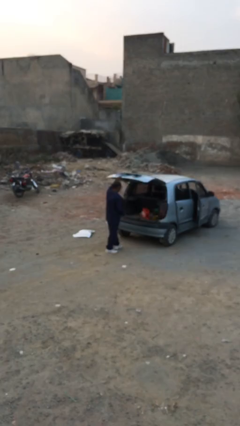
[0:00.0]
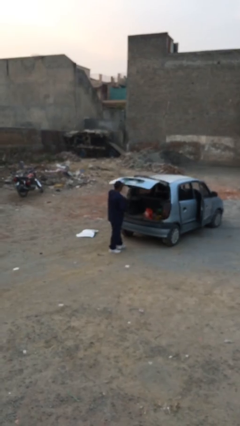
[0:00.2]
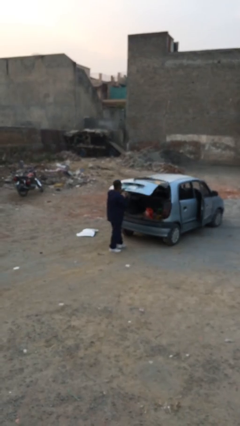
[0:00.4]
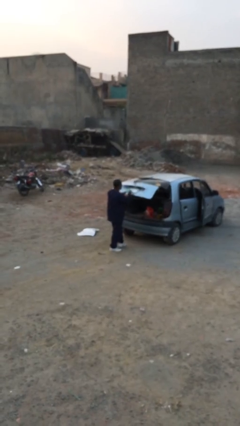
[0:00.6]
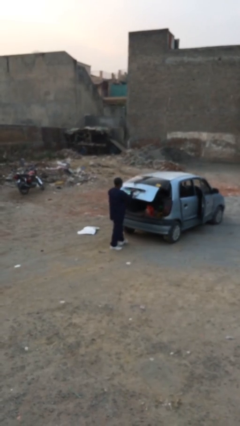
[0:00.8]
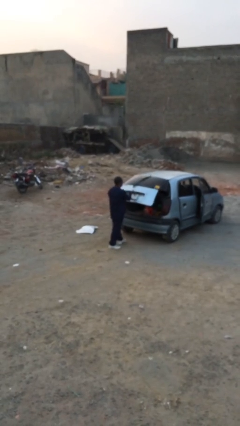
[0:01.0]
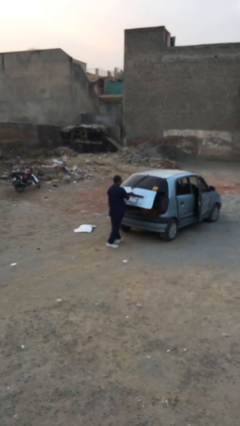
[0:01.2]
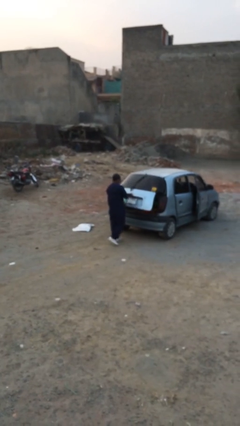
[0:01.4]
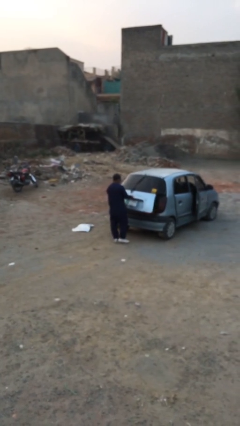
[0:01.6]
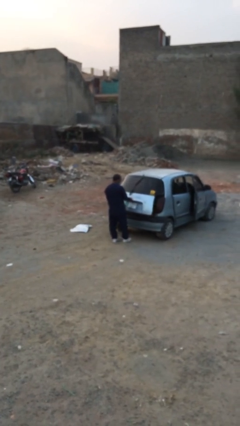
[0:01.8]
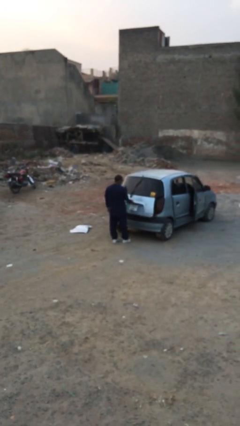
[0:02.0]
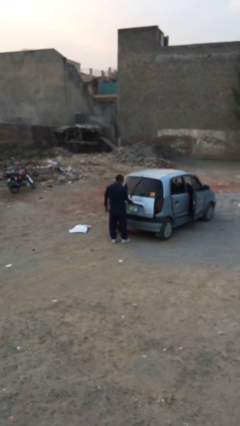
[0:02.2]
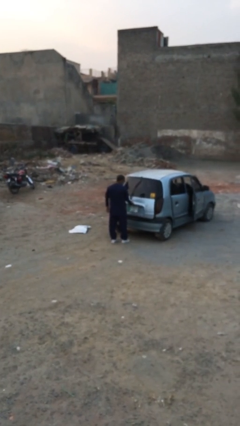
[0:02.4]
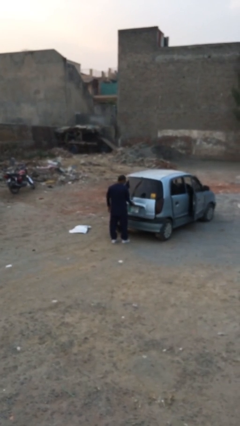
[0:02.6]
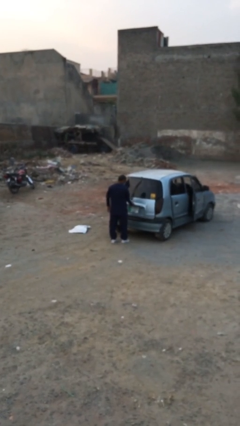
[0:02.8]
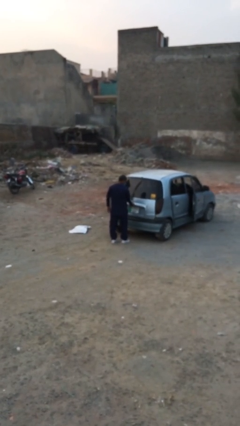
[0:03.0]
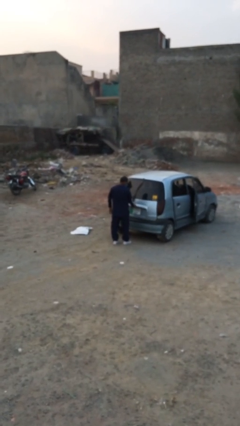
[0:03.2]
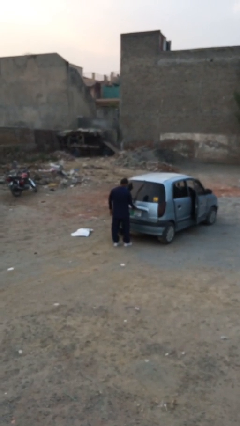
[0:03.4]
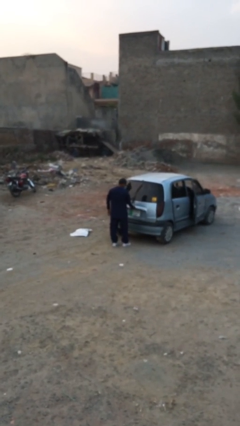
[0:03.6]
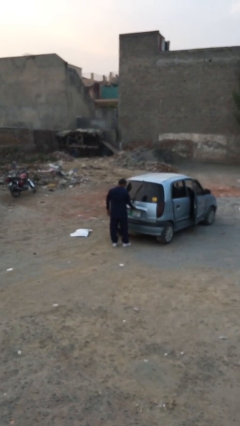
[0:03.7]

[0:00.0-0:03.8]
person closes car trunk

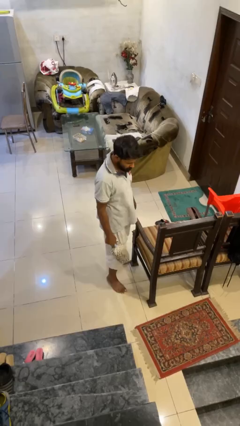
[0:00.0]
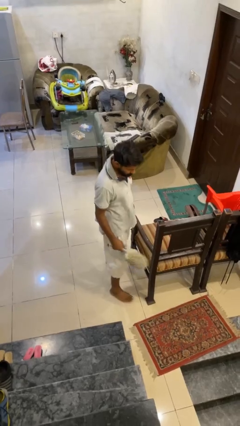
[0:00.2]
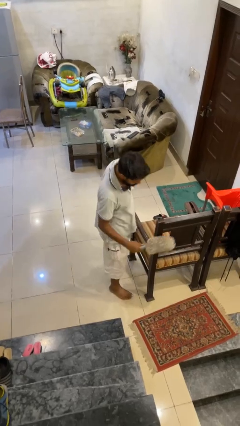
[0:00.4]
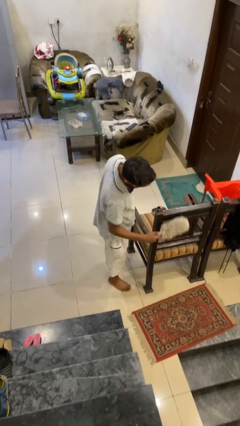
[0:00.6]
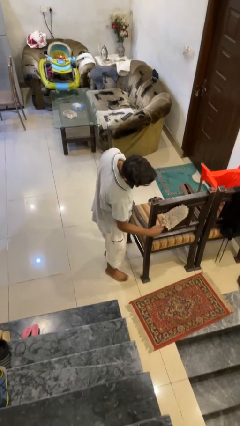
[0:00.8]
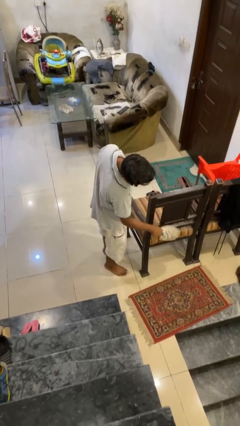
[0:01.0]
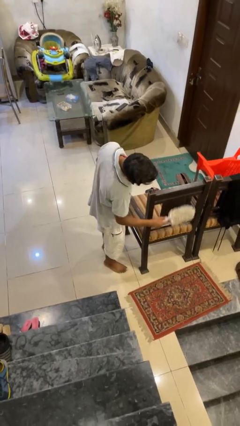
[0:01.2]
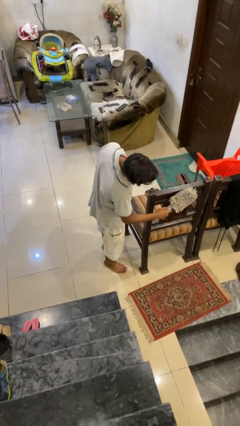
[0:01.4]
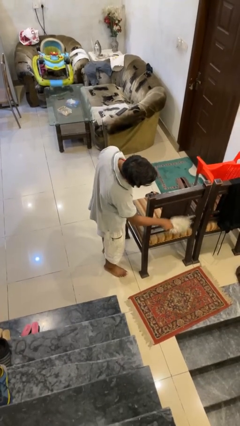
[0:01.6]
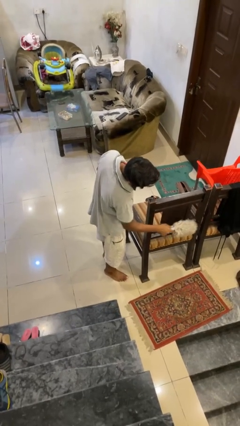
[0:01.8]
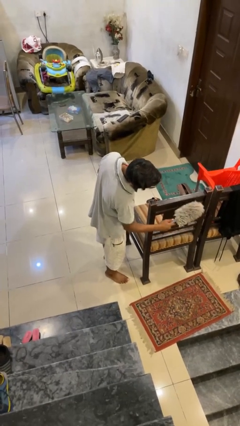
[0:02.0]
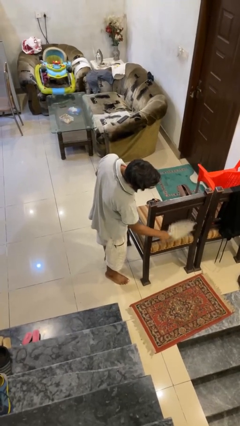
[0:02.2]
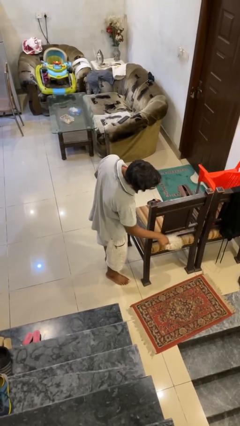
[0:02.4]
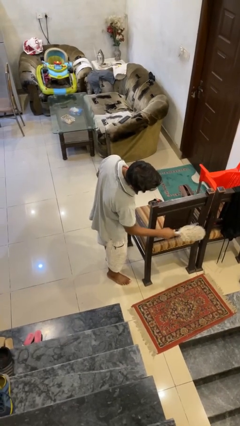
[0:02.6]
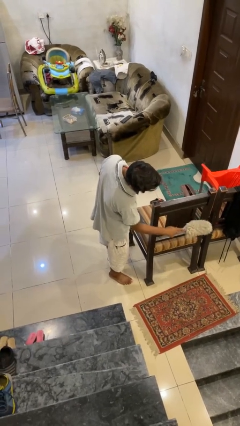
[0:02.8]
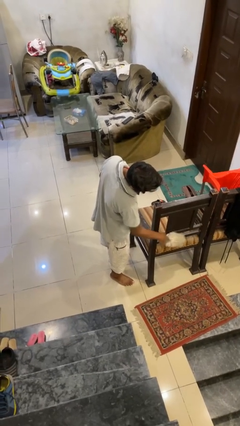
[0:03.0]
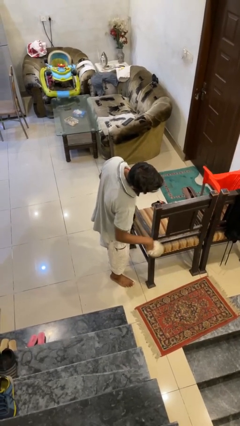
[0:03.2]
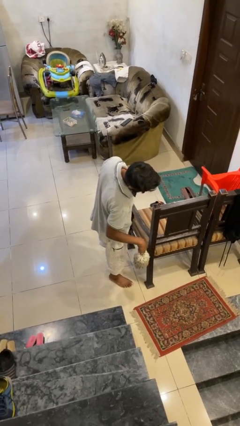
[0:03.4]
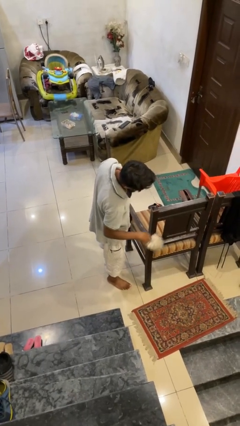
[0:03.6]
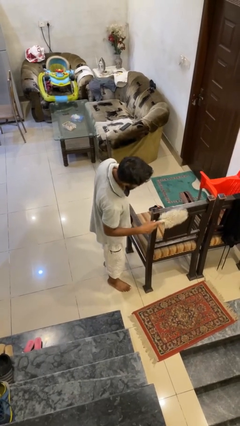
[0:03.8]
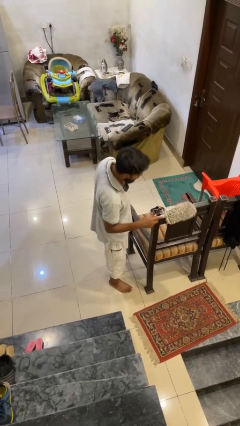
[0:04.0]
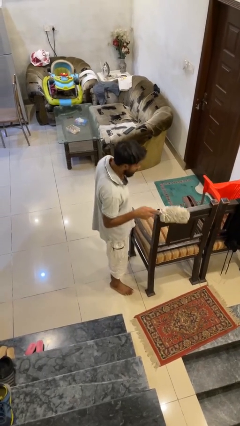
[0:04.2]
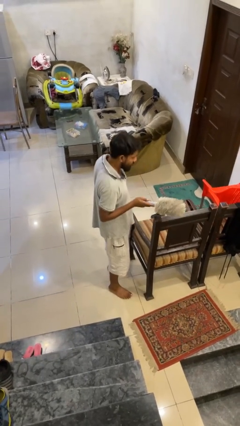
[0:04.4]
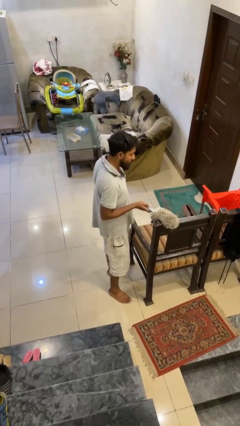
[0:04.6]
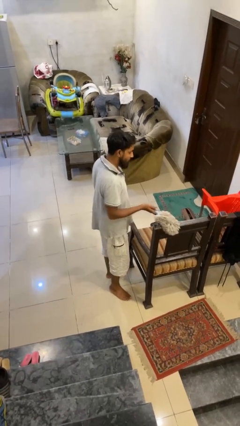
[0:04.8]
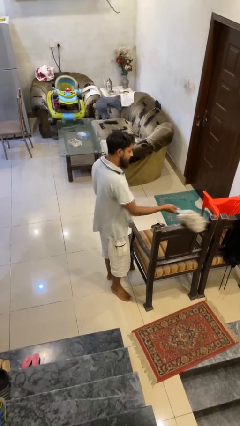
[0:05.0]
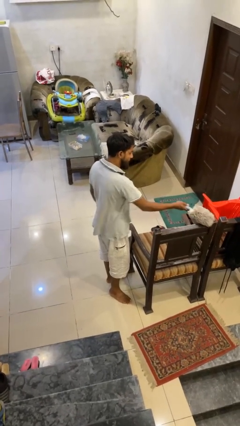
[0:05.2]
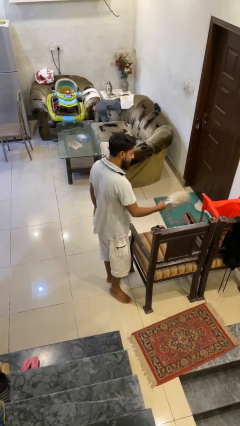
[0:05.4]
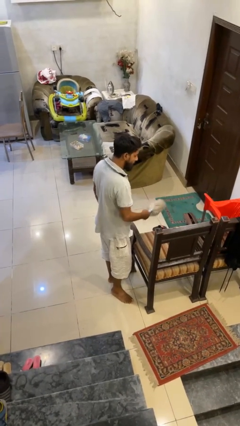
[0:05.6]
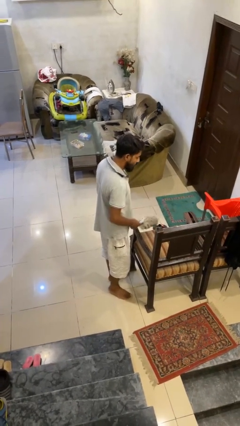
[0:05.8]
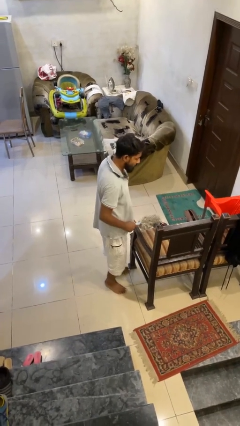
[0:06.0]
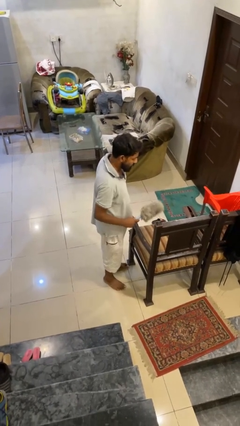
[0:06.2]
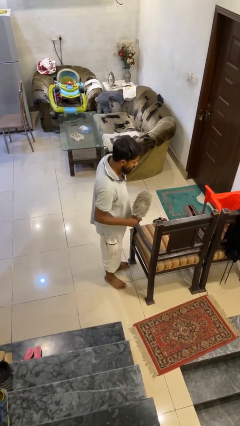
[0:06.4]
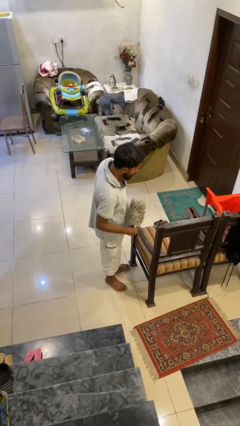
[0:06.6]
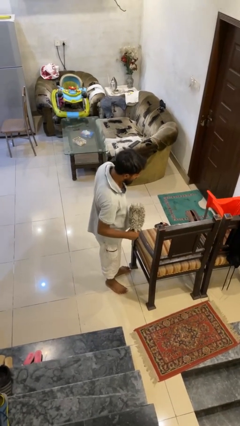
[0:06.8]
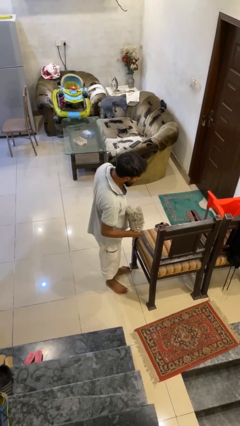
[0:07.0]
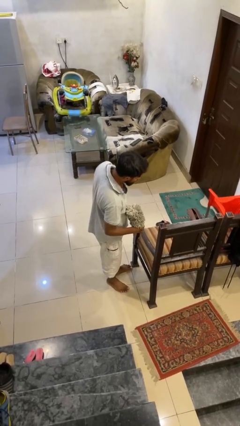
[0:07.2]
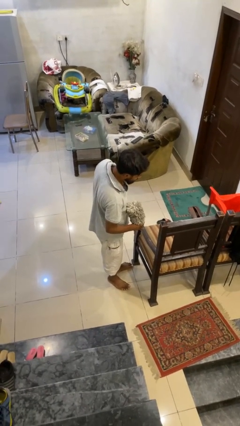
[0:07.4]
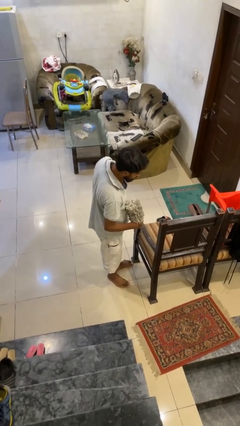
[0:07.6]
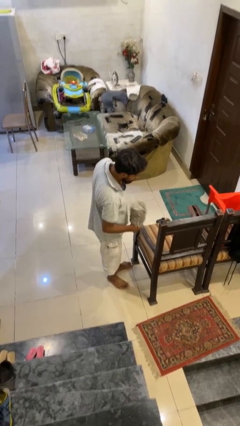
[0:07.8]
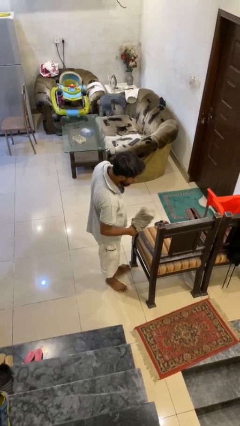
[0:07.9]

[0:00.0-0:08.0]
person dusts furniture

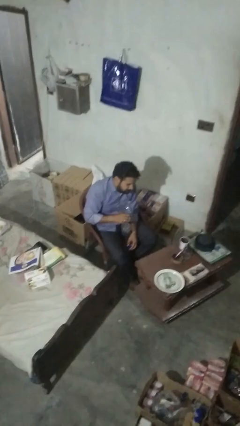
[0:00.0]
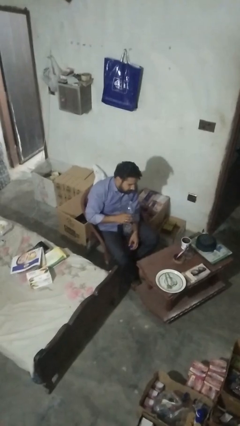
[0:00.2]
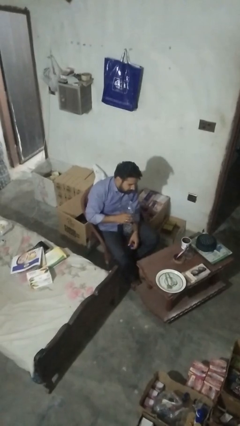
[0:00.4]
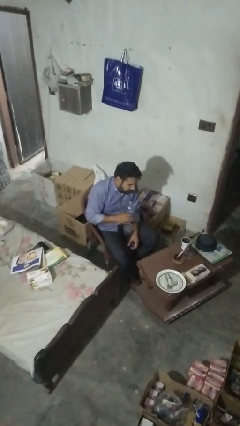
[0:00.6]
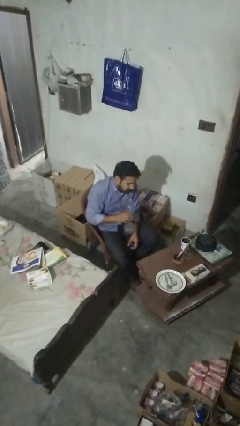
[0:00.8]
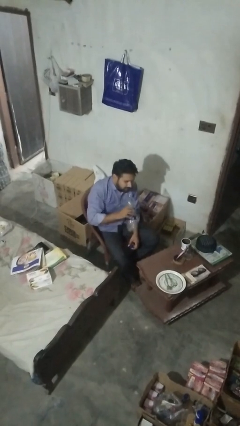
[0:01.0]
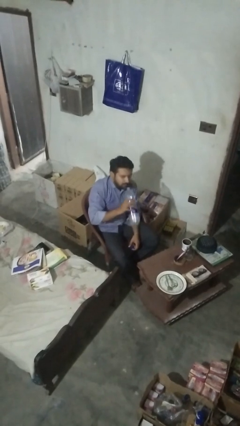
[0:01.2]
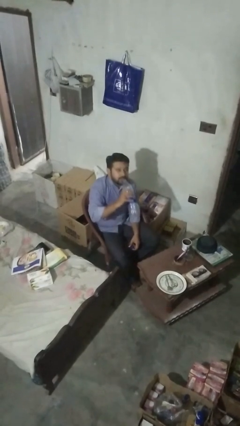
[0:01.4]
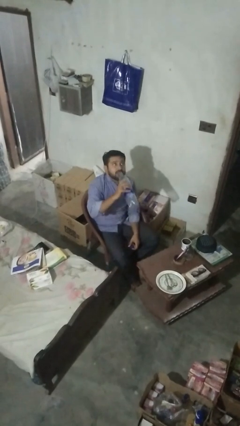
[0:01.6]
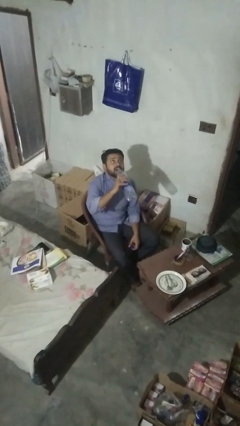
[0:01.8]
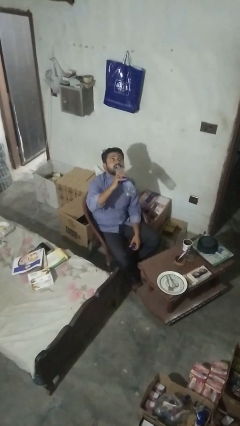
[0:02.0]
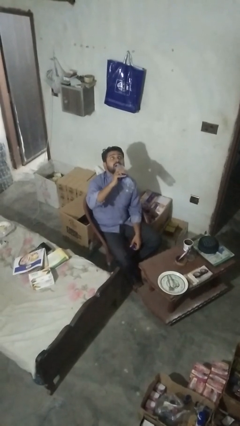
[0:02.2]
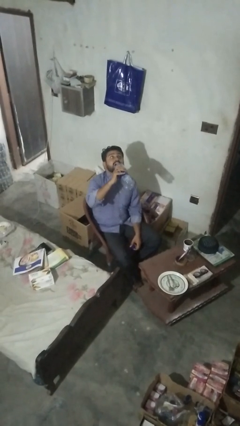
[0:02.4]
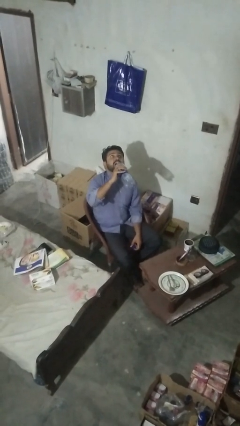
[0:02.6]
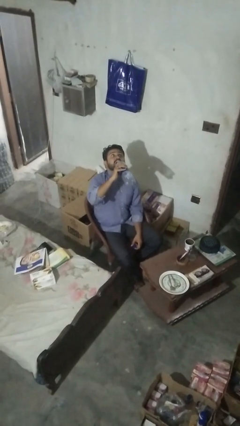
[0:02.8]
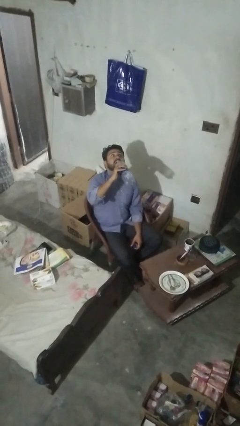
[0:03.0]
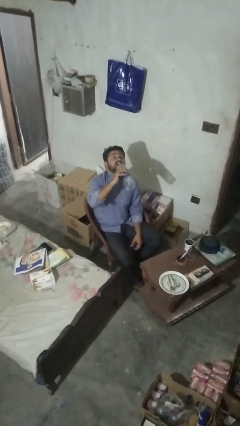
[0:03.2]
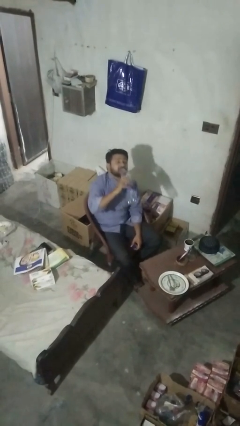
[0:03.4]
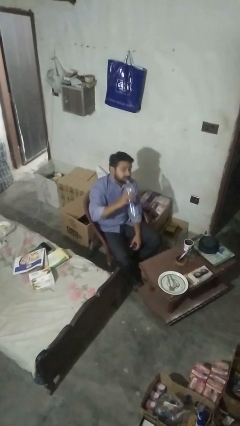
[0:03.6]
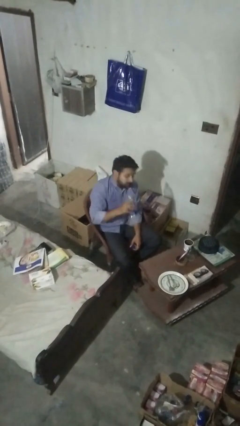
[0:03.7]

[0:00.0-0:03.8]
person drinks from bottle

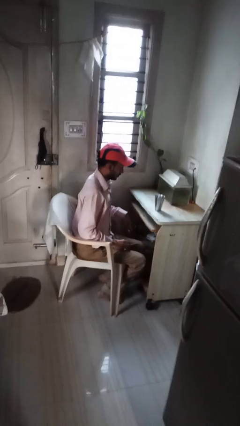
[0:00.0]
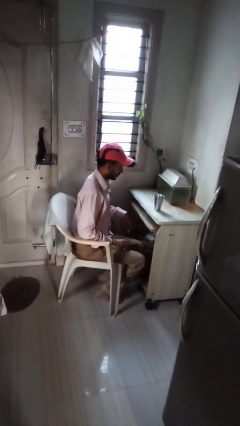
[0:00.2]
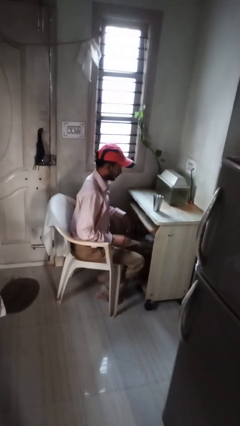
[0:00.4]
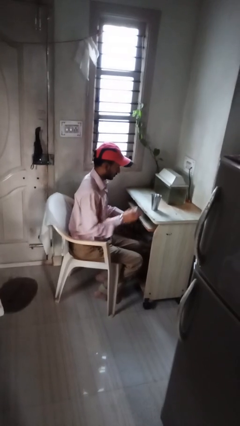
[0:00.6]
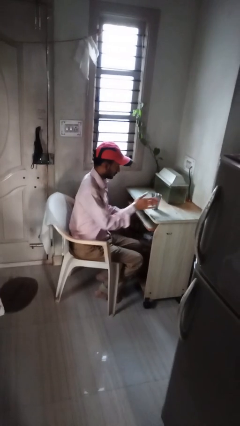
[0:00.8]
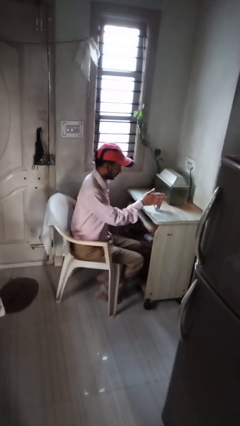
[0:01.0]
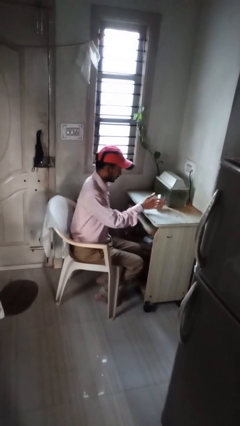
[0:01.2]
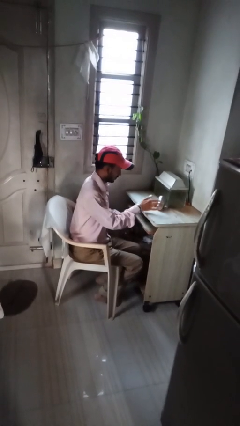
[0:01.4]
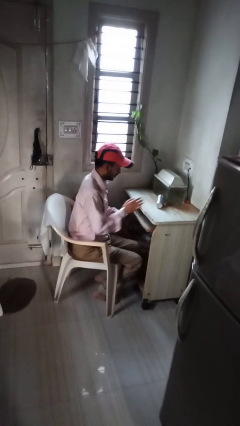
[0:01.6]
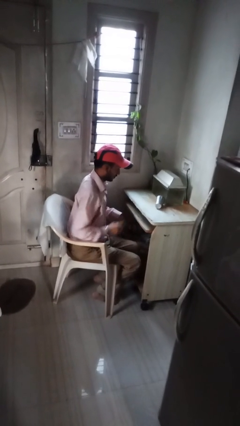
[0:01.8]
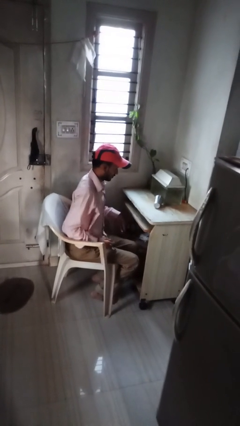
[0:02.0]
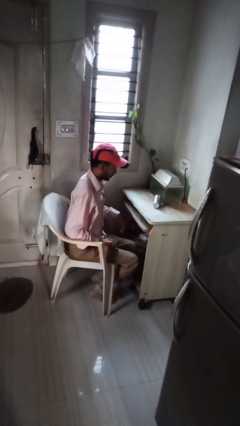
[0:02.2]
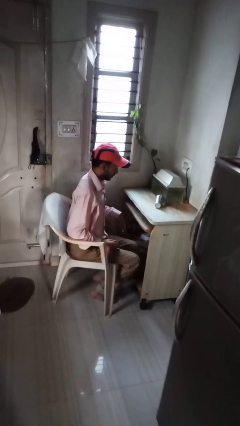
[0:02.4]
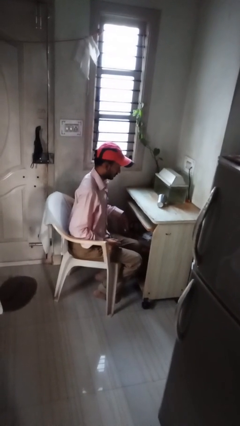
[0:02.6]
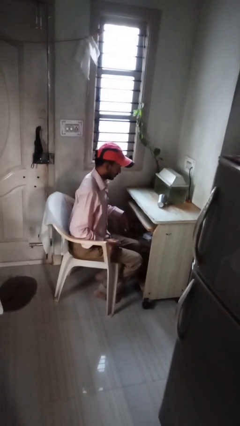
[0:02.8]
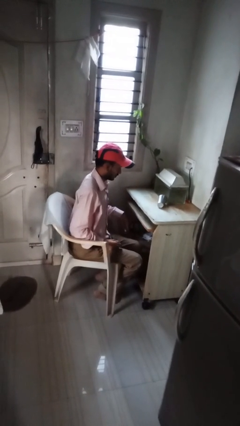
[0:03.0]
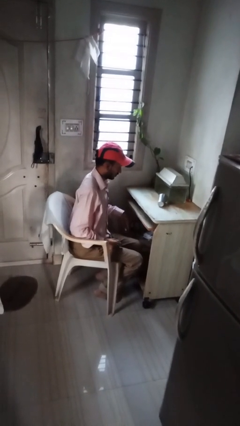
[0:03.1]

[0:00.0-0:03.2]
person knocks over glass
